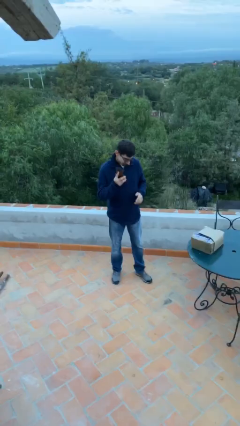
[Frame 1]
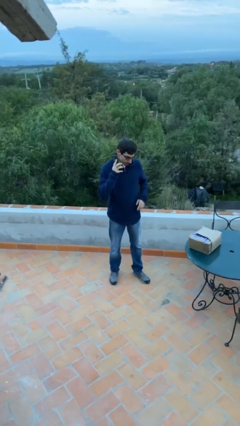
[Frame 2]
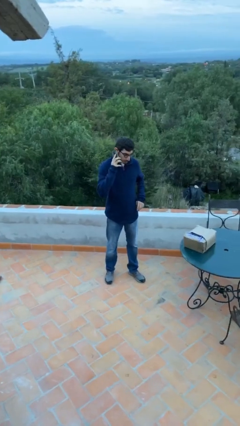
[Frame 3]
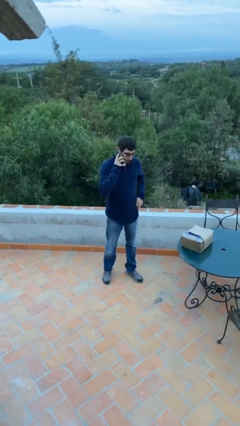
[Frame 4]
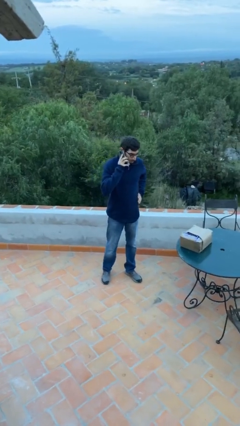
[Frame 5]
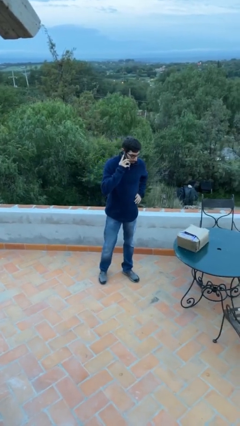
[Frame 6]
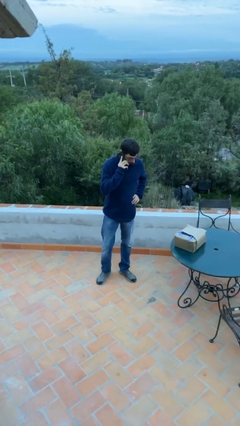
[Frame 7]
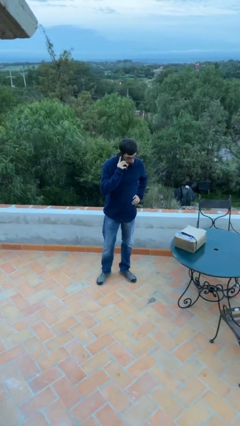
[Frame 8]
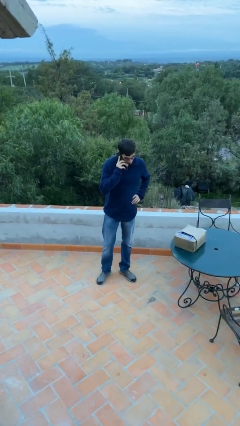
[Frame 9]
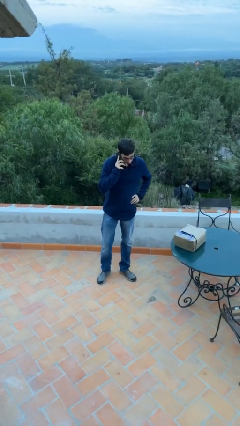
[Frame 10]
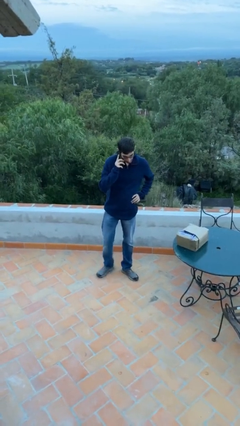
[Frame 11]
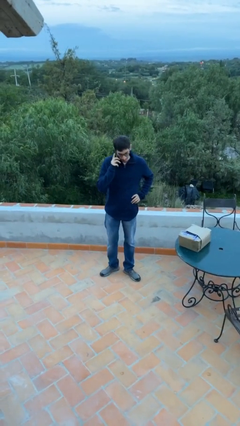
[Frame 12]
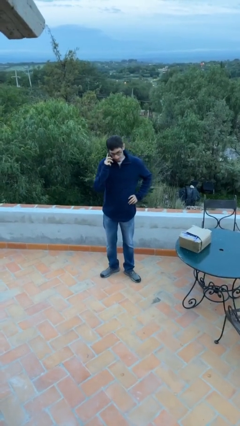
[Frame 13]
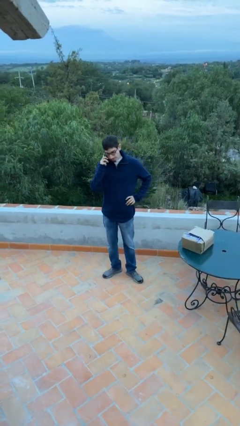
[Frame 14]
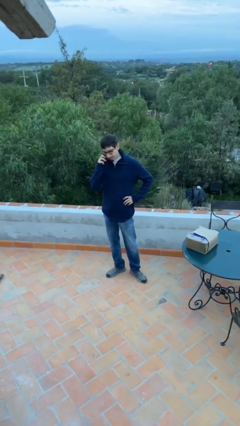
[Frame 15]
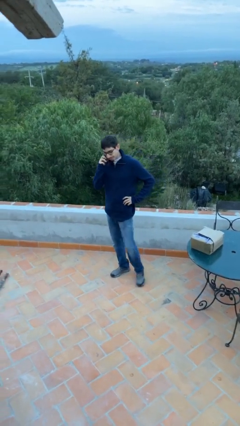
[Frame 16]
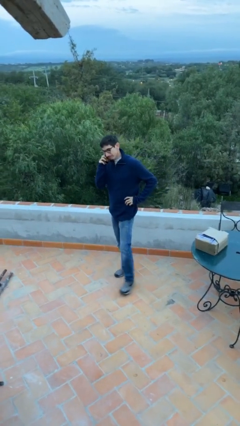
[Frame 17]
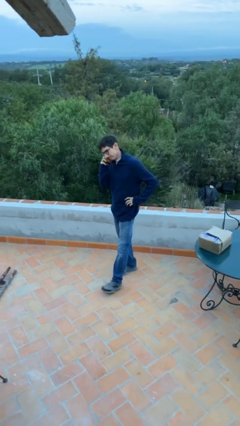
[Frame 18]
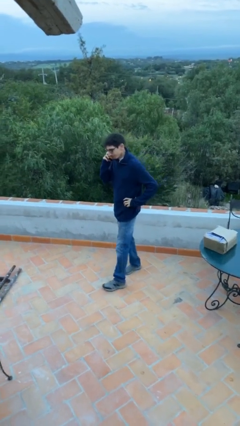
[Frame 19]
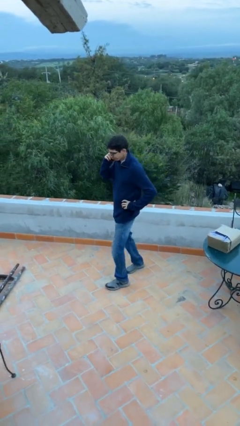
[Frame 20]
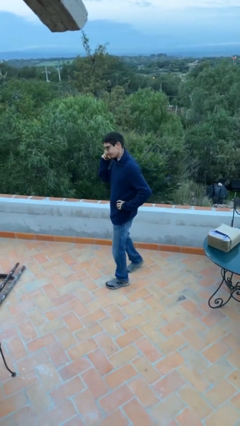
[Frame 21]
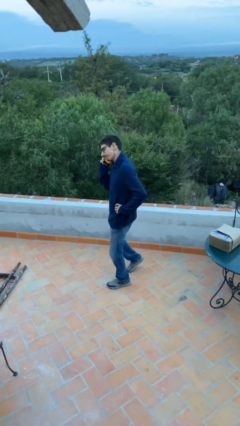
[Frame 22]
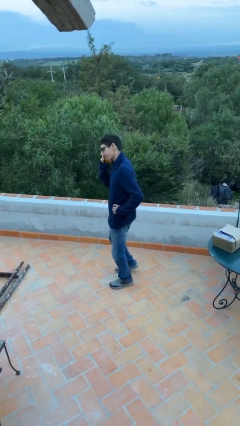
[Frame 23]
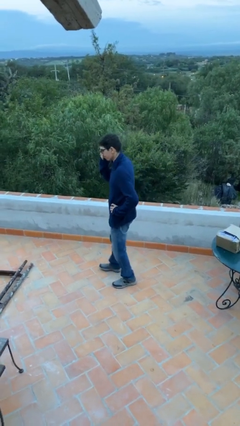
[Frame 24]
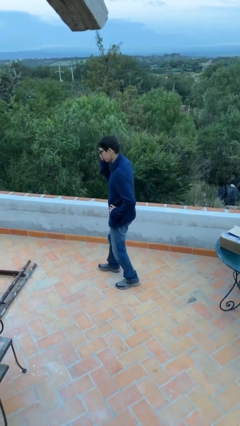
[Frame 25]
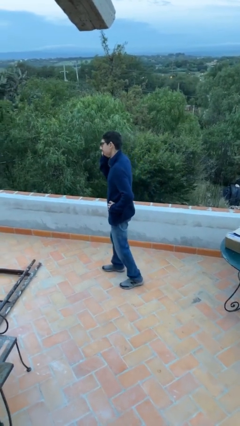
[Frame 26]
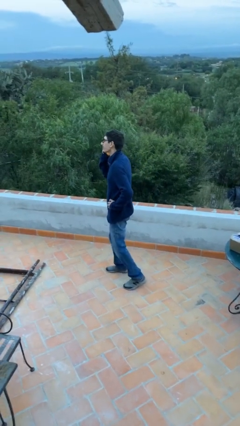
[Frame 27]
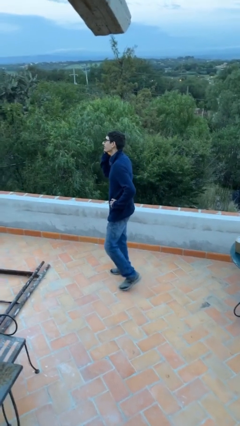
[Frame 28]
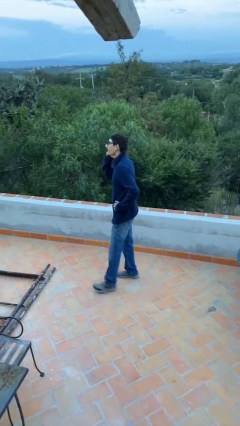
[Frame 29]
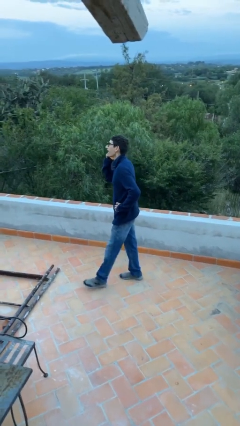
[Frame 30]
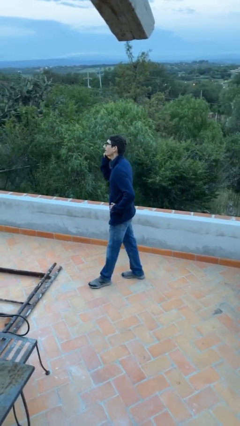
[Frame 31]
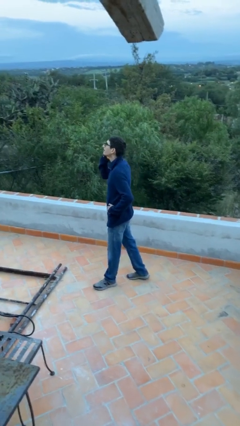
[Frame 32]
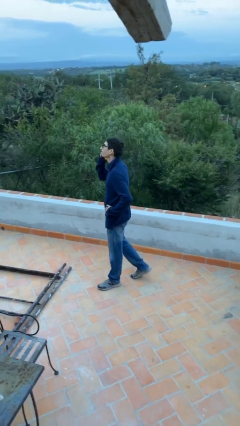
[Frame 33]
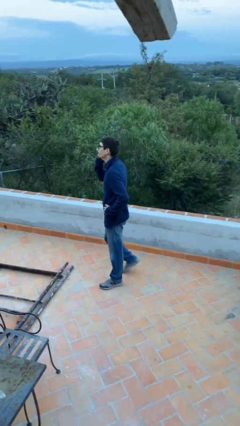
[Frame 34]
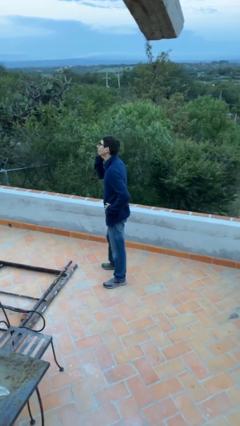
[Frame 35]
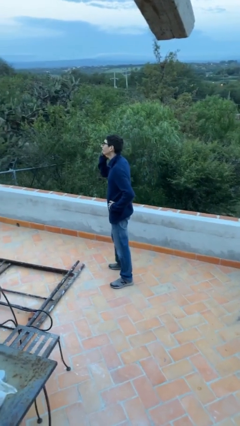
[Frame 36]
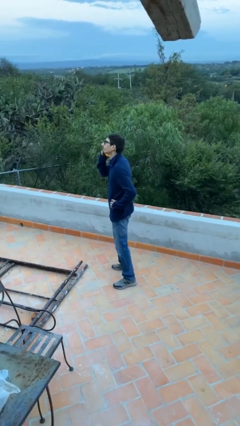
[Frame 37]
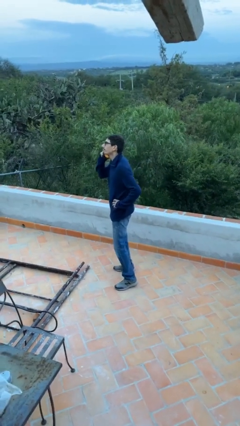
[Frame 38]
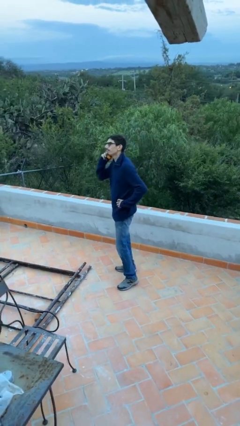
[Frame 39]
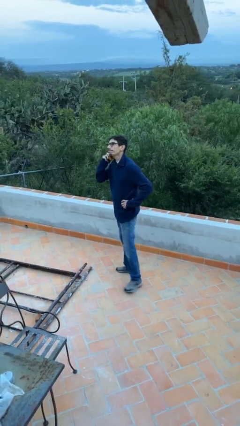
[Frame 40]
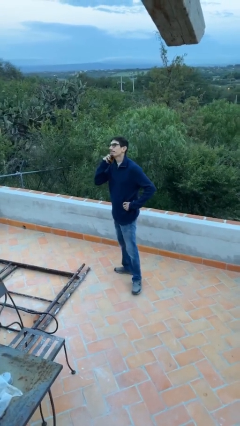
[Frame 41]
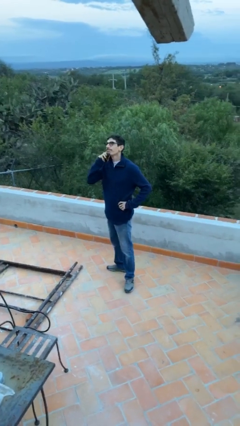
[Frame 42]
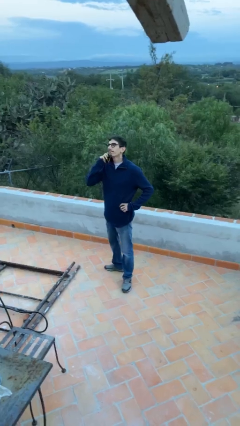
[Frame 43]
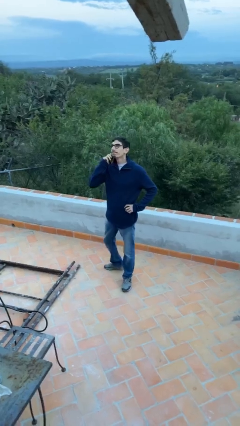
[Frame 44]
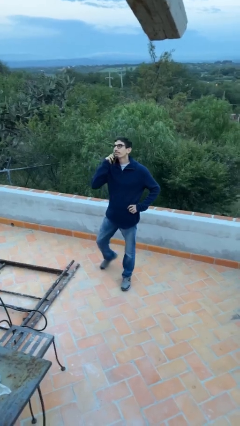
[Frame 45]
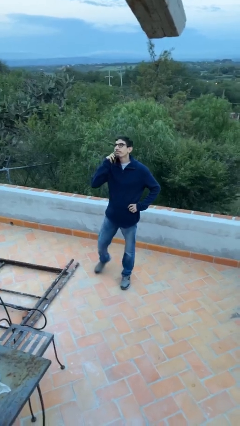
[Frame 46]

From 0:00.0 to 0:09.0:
person talks on phone

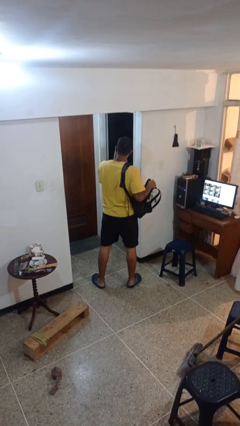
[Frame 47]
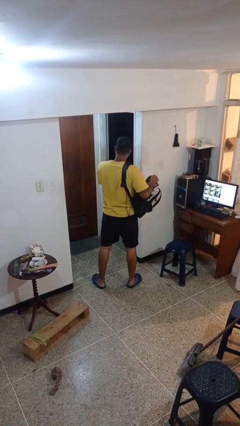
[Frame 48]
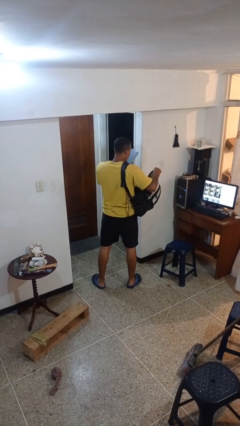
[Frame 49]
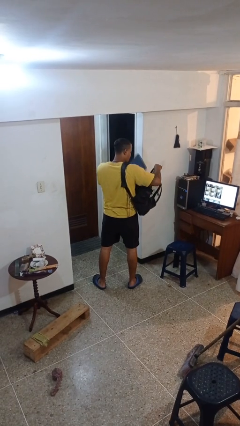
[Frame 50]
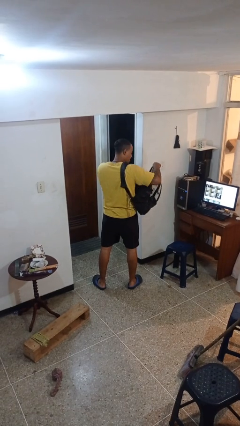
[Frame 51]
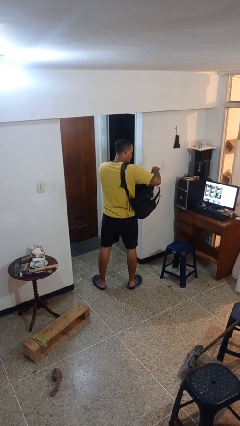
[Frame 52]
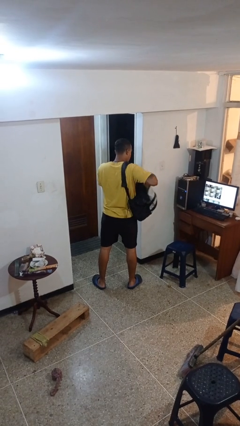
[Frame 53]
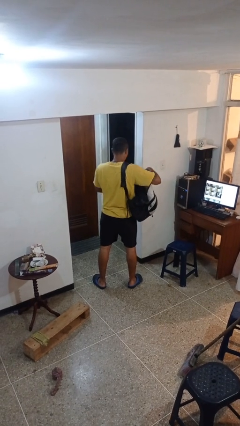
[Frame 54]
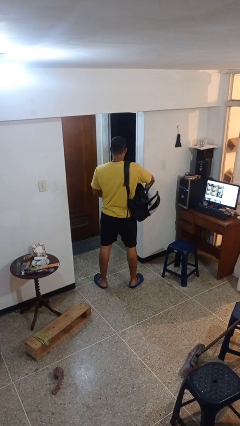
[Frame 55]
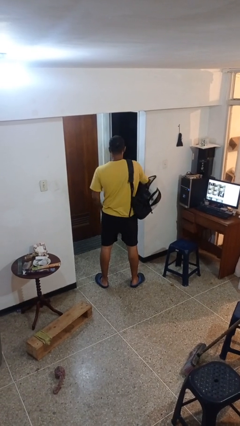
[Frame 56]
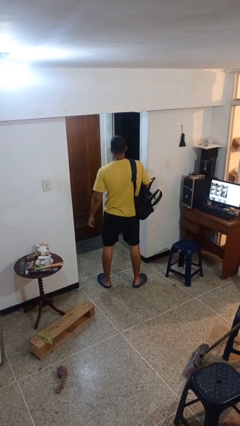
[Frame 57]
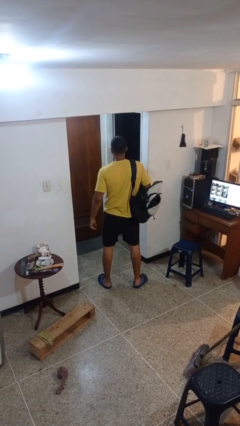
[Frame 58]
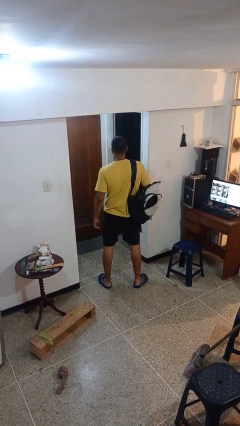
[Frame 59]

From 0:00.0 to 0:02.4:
person puts object into backpack

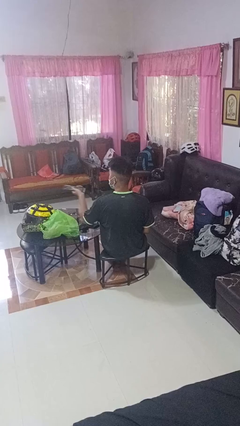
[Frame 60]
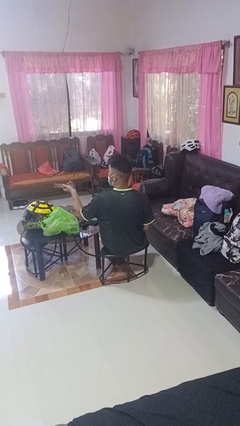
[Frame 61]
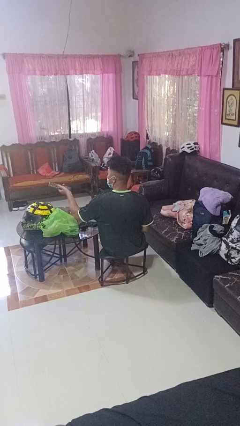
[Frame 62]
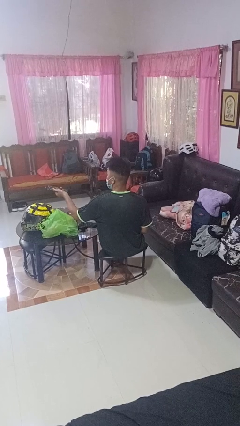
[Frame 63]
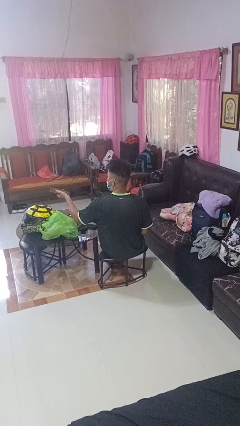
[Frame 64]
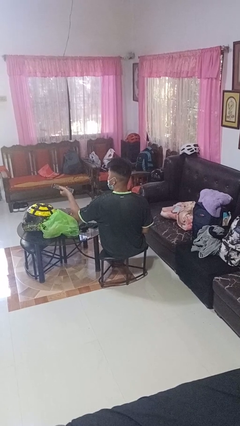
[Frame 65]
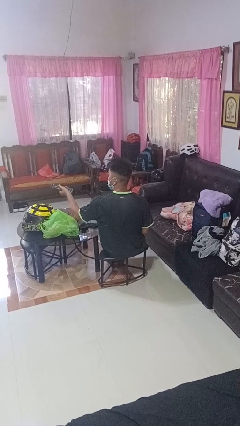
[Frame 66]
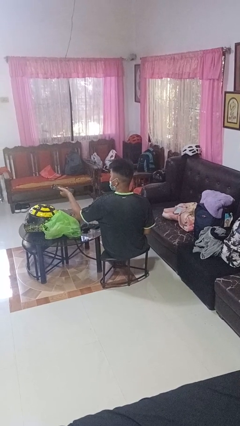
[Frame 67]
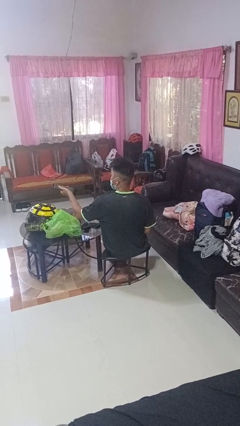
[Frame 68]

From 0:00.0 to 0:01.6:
person uses television remote

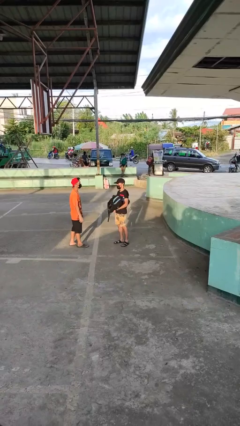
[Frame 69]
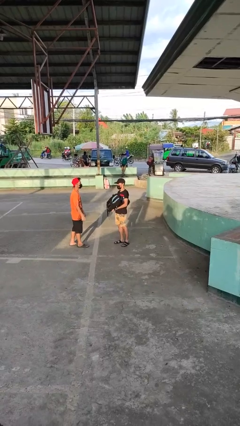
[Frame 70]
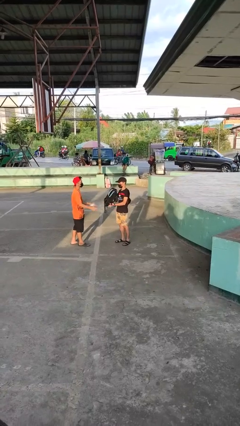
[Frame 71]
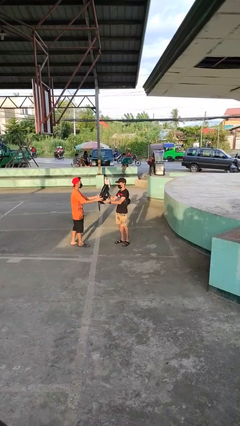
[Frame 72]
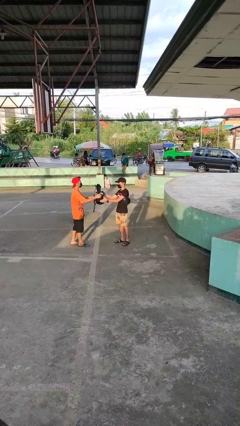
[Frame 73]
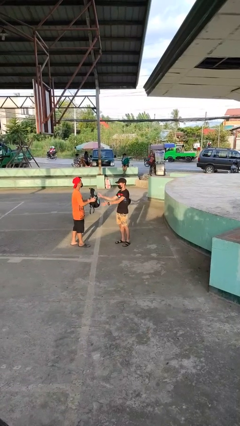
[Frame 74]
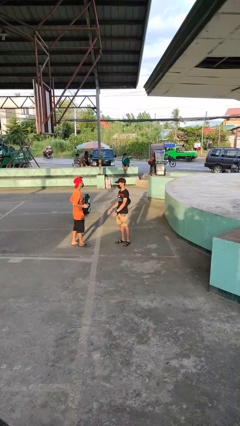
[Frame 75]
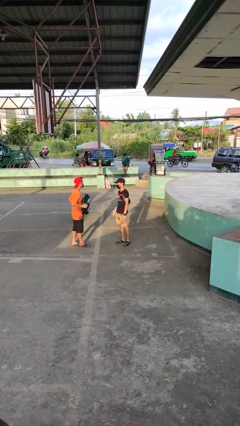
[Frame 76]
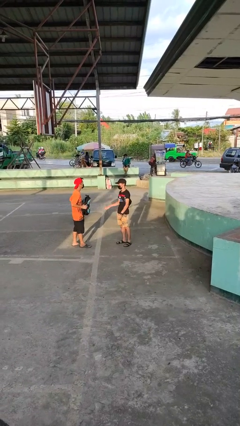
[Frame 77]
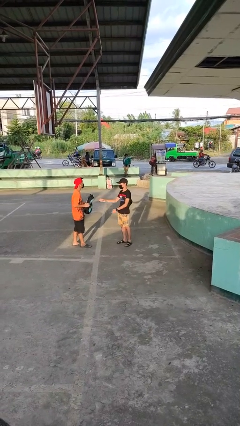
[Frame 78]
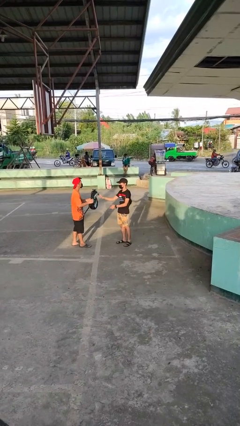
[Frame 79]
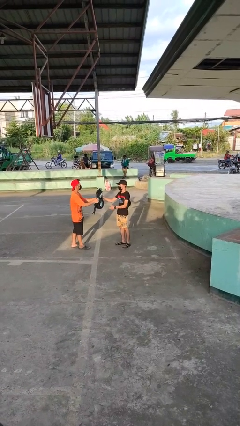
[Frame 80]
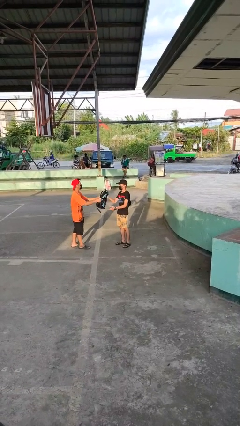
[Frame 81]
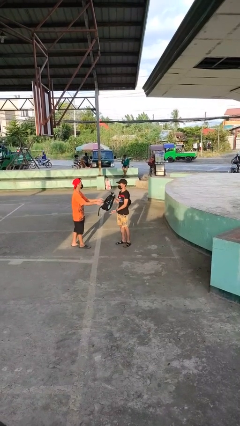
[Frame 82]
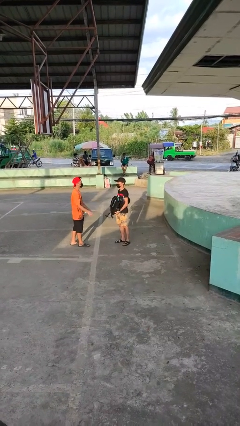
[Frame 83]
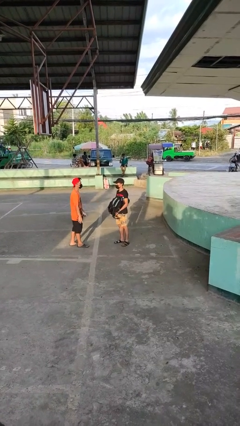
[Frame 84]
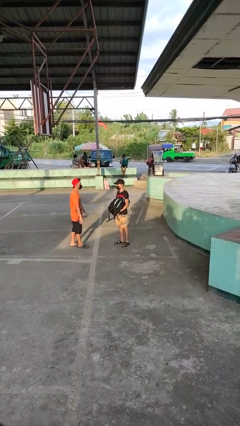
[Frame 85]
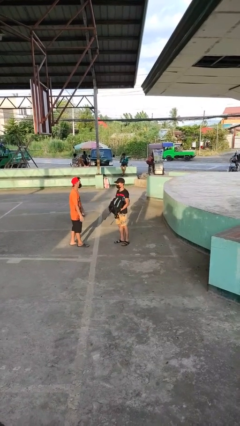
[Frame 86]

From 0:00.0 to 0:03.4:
person transfers object to person

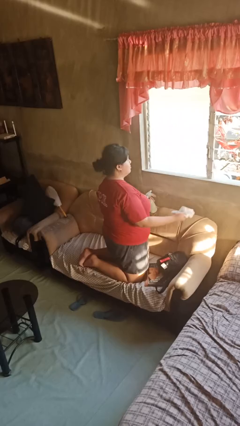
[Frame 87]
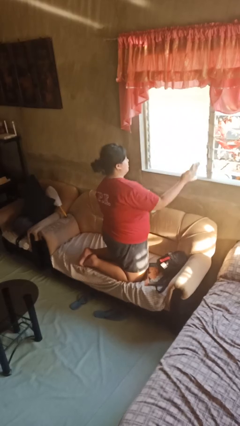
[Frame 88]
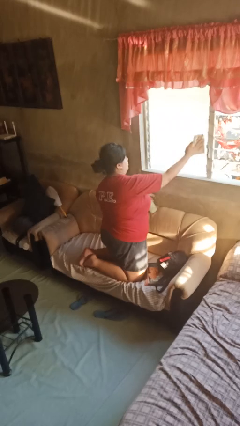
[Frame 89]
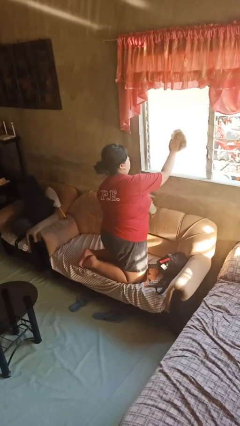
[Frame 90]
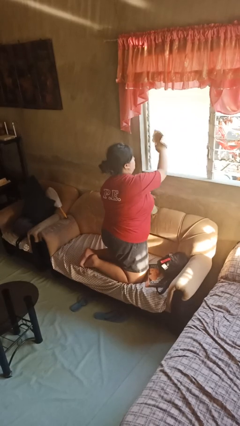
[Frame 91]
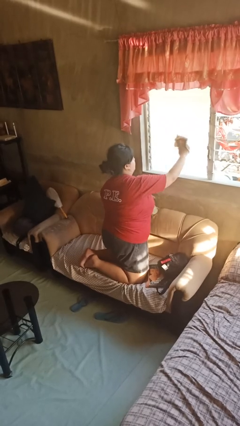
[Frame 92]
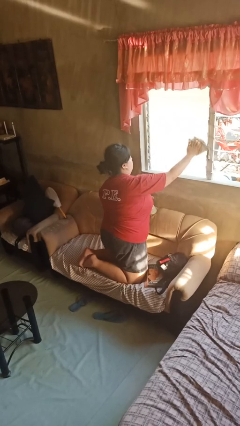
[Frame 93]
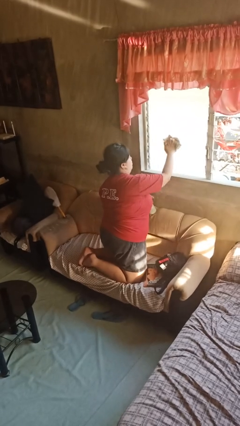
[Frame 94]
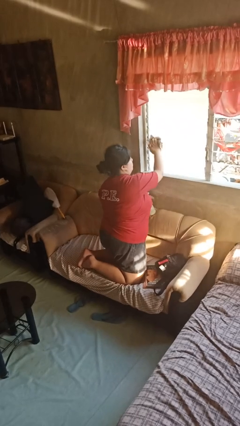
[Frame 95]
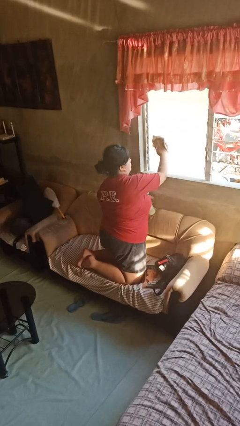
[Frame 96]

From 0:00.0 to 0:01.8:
person washes window
